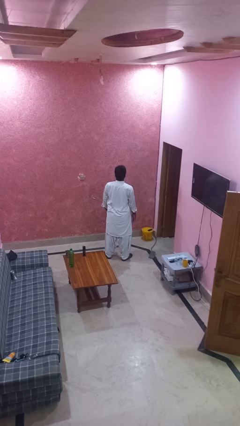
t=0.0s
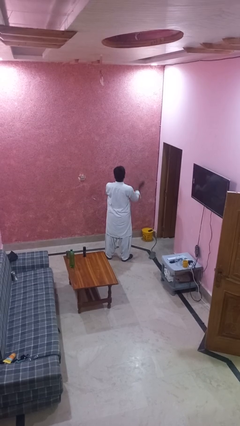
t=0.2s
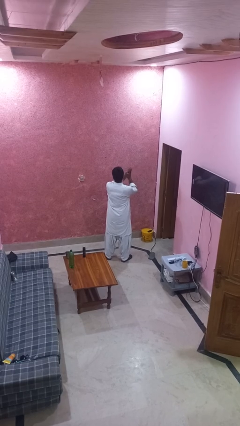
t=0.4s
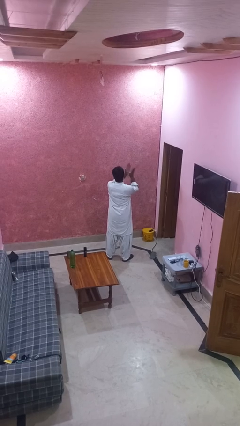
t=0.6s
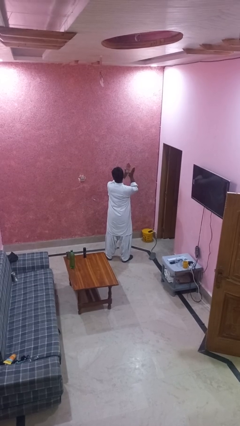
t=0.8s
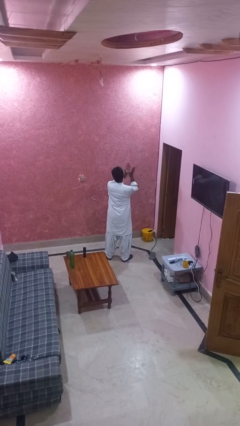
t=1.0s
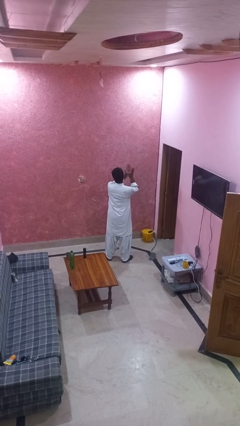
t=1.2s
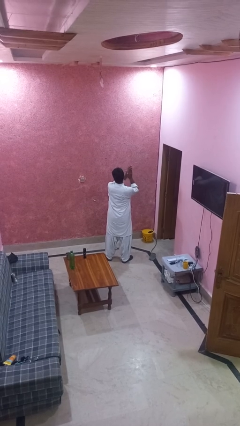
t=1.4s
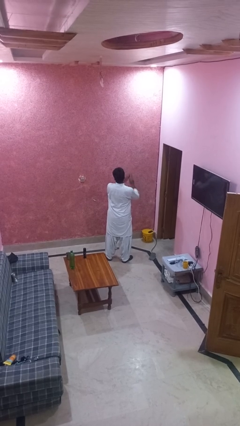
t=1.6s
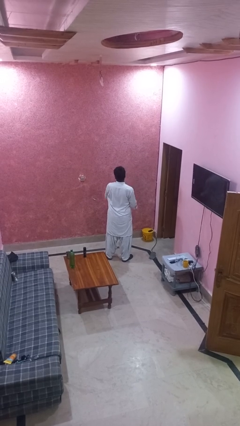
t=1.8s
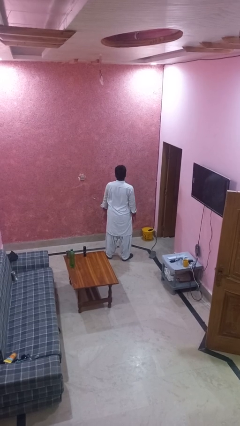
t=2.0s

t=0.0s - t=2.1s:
person claps hands

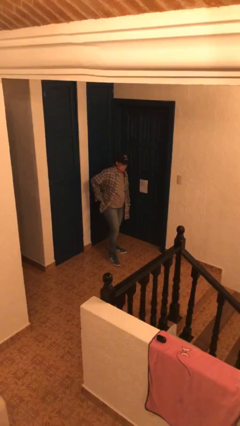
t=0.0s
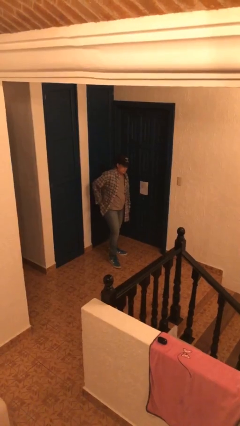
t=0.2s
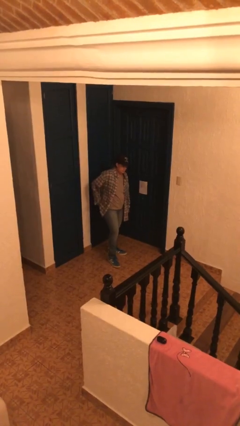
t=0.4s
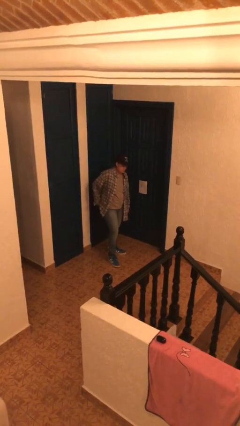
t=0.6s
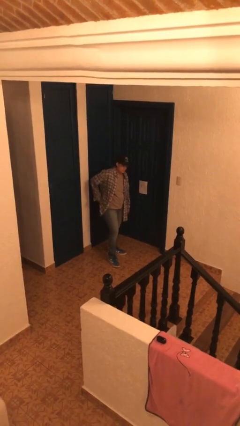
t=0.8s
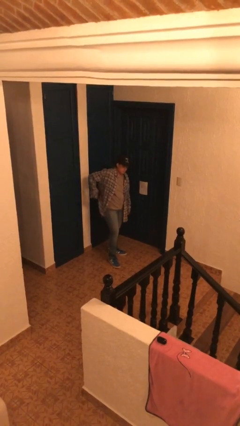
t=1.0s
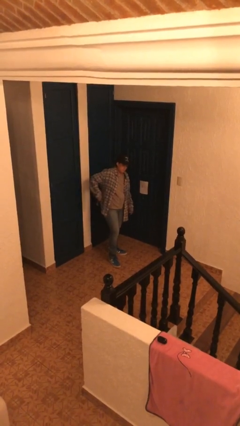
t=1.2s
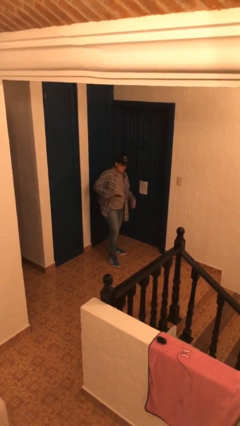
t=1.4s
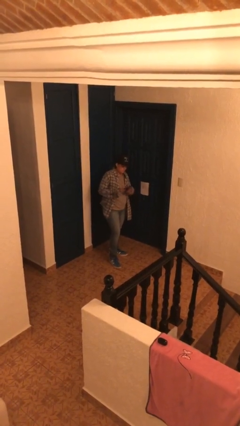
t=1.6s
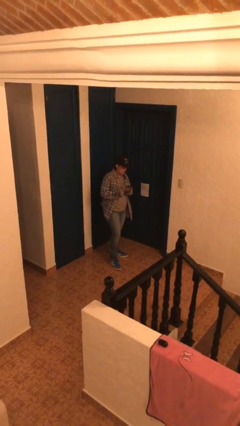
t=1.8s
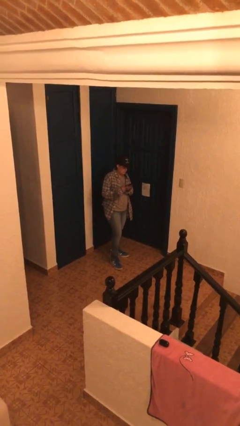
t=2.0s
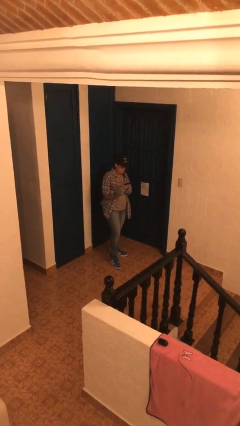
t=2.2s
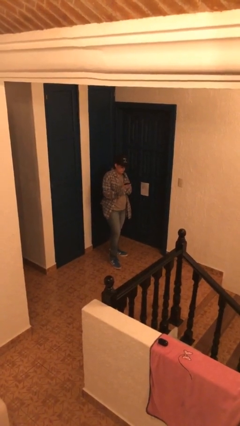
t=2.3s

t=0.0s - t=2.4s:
person takes phone from pocket

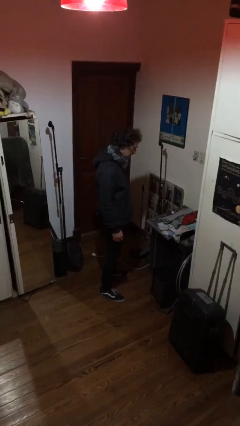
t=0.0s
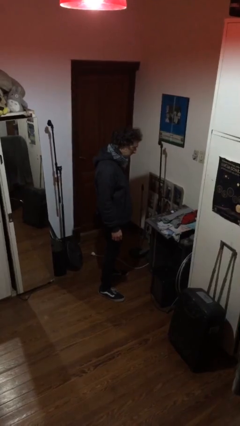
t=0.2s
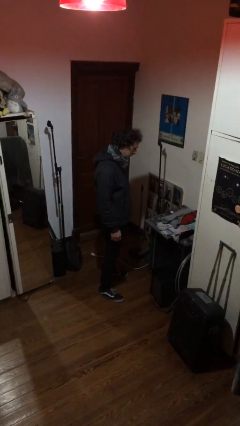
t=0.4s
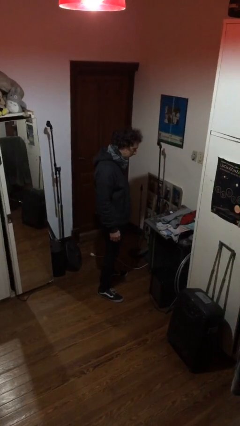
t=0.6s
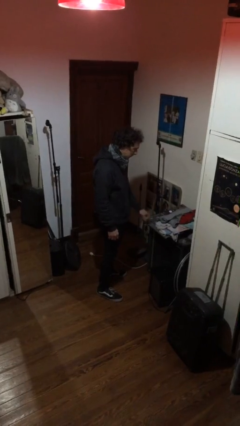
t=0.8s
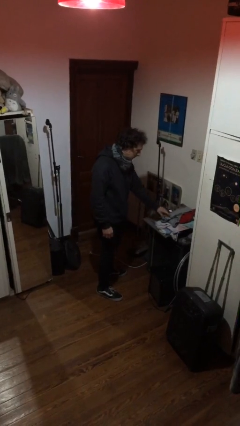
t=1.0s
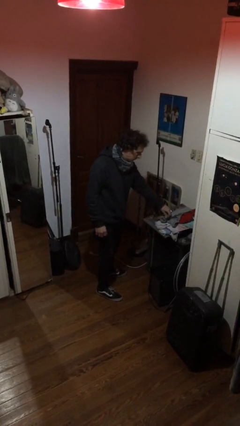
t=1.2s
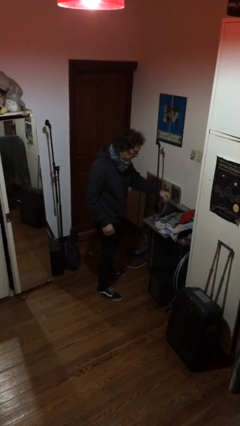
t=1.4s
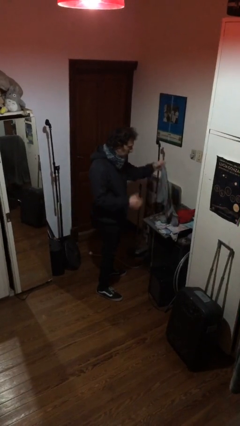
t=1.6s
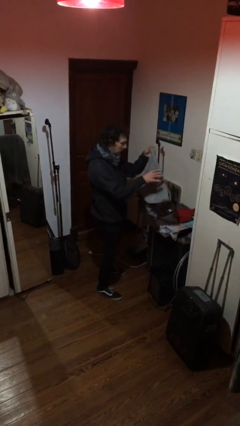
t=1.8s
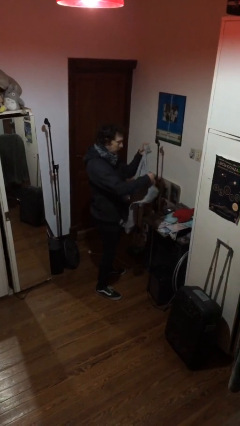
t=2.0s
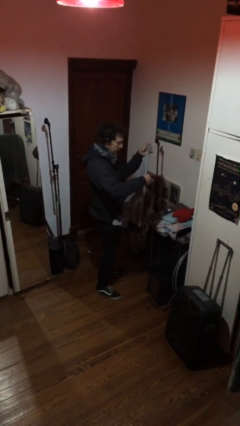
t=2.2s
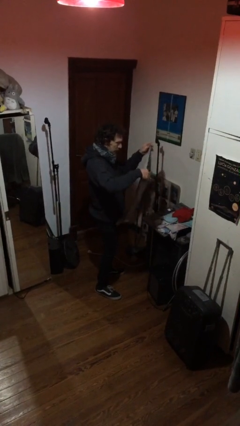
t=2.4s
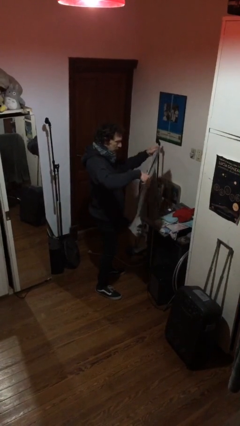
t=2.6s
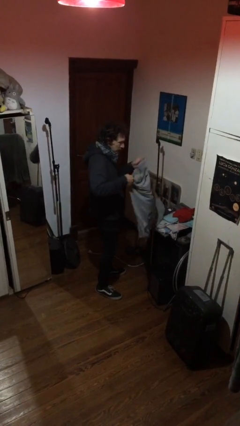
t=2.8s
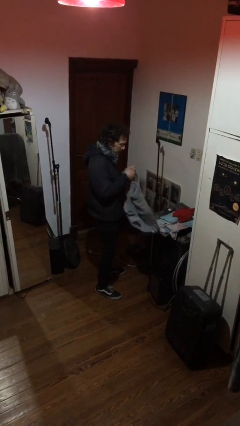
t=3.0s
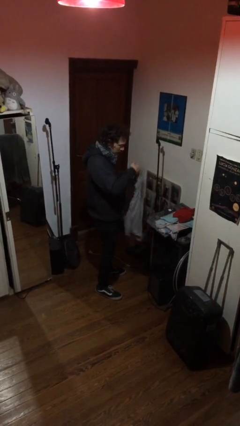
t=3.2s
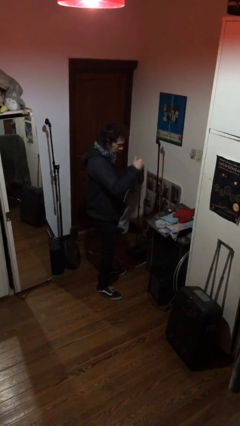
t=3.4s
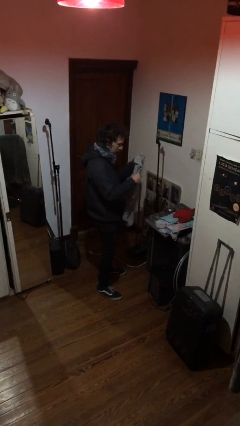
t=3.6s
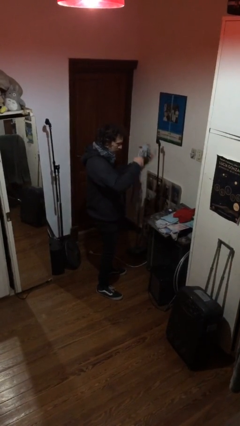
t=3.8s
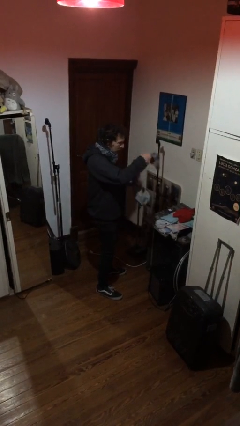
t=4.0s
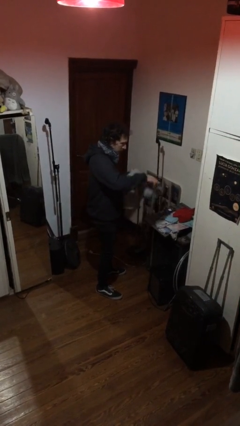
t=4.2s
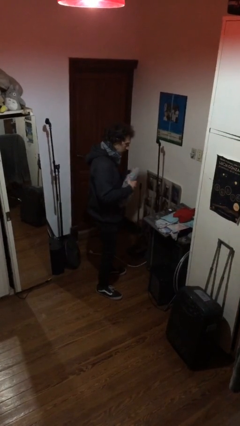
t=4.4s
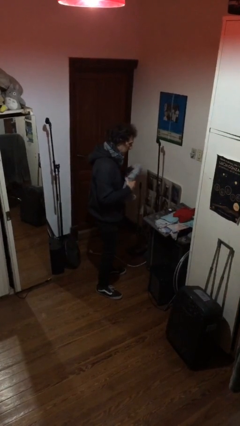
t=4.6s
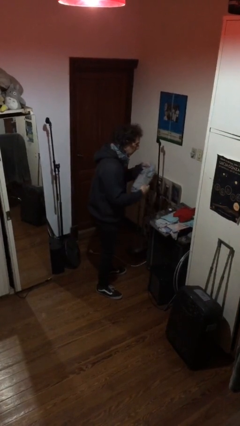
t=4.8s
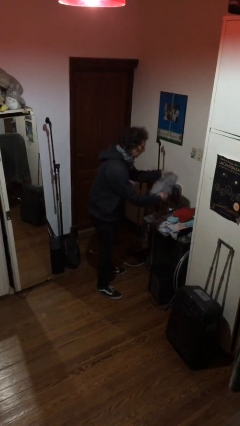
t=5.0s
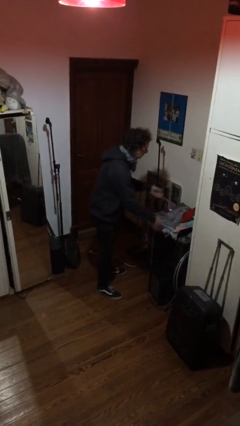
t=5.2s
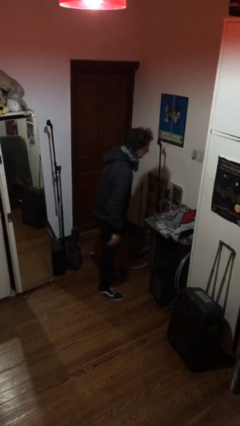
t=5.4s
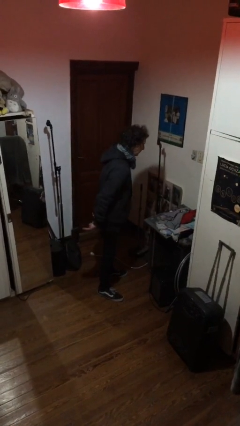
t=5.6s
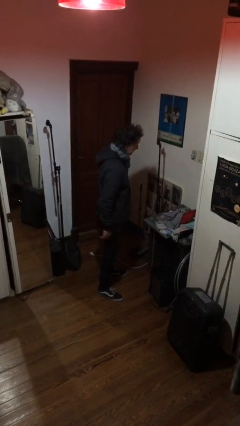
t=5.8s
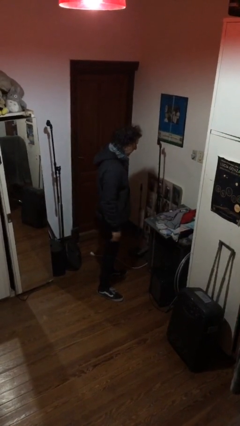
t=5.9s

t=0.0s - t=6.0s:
person folds shirt

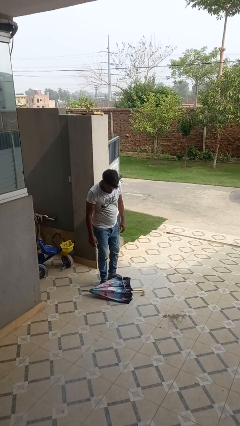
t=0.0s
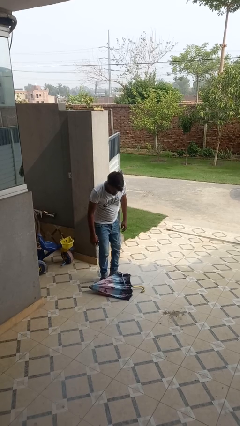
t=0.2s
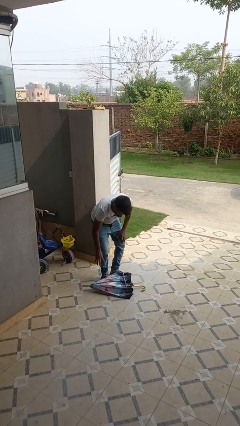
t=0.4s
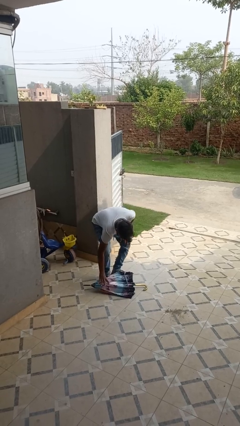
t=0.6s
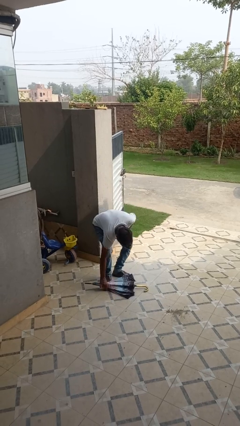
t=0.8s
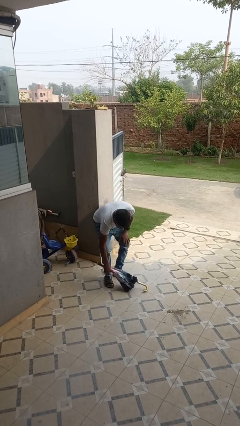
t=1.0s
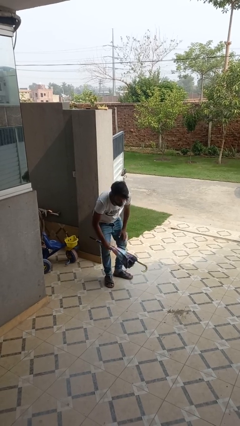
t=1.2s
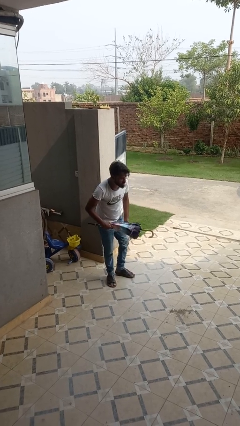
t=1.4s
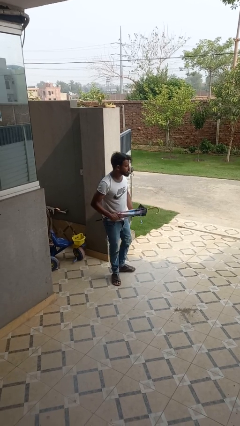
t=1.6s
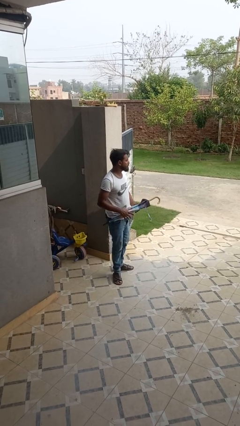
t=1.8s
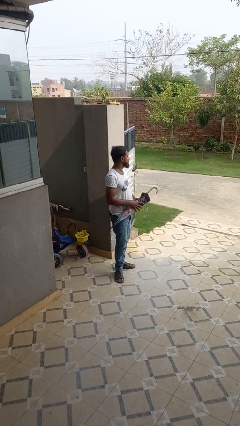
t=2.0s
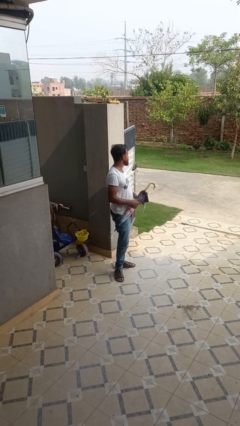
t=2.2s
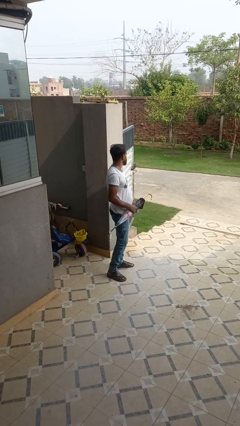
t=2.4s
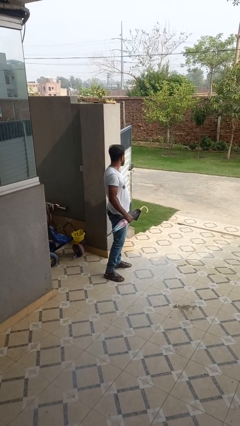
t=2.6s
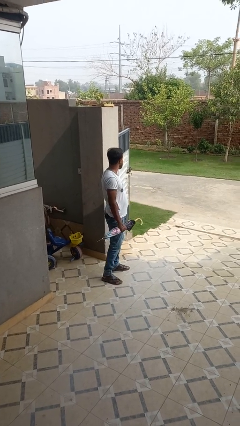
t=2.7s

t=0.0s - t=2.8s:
person picks up object from floor

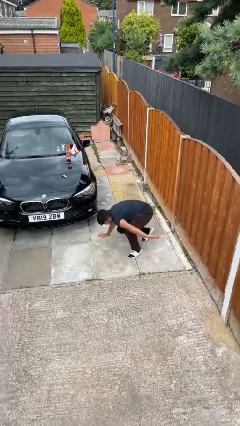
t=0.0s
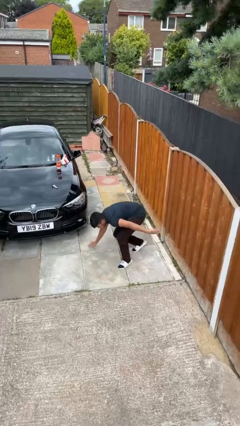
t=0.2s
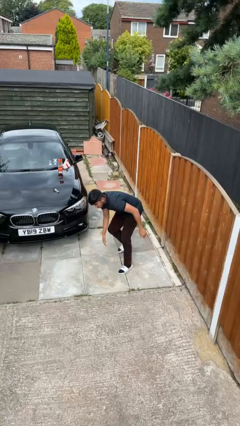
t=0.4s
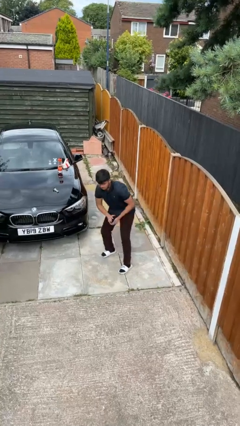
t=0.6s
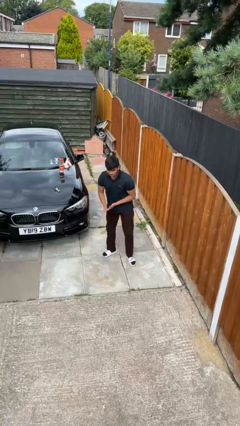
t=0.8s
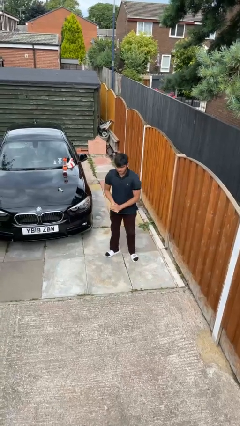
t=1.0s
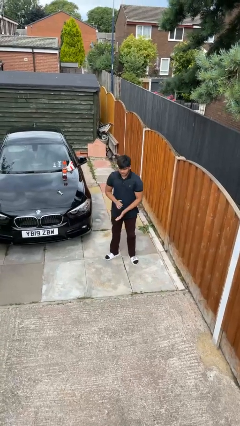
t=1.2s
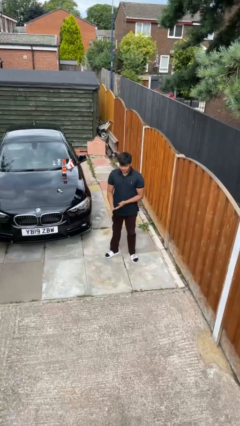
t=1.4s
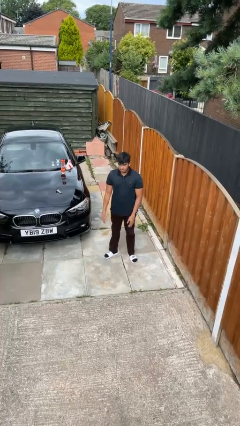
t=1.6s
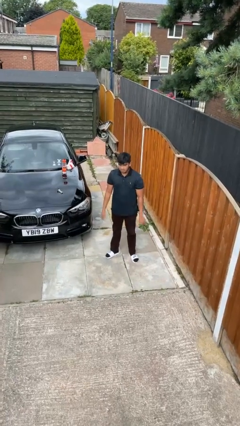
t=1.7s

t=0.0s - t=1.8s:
person stands up from floor

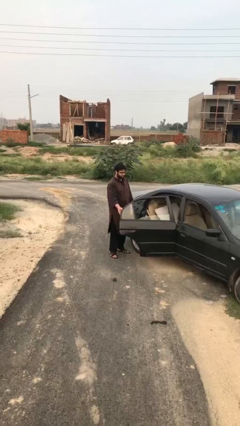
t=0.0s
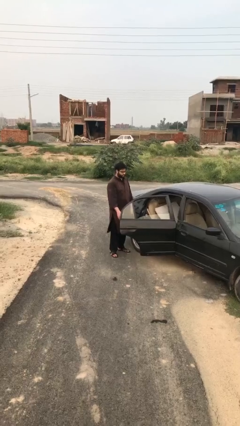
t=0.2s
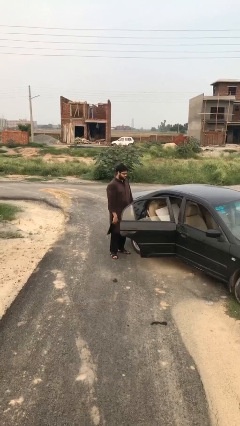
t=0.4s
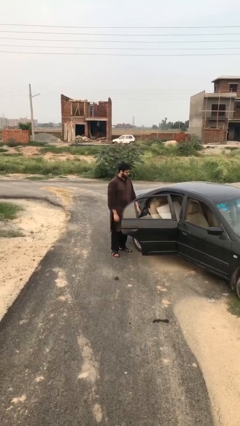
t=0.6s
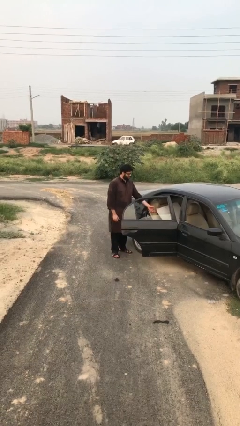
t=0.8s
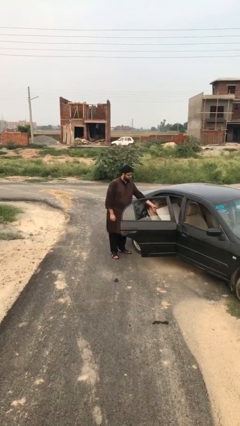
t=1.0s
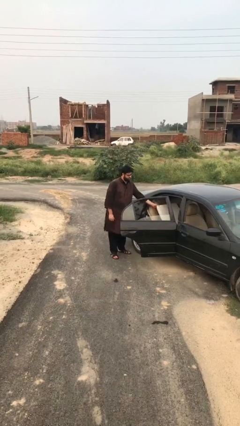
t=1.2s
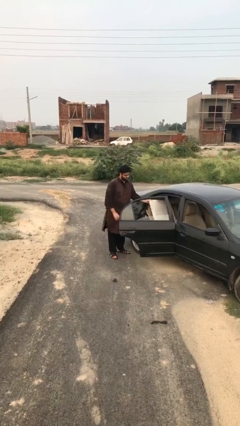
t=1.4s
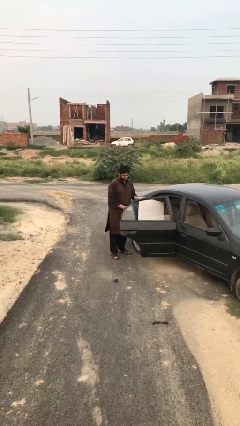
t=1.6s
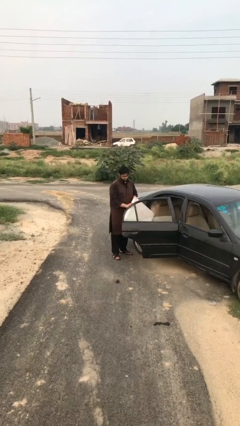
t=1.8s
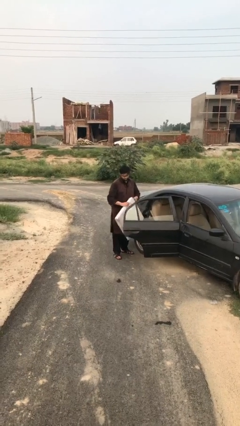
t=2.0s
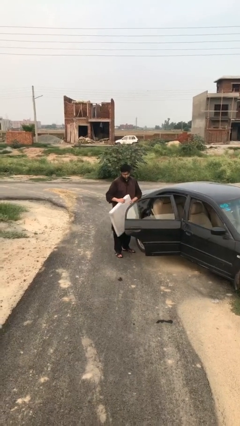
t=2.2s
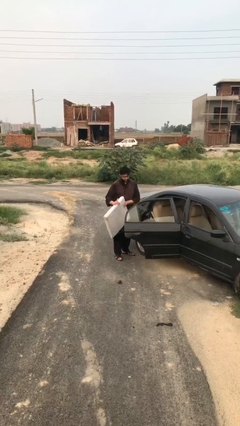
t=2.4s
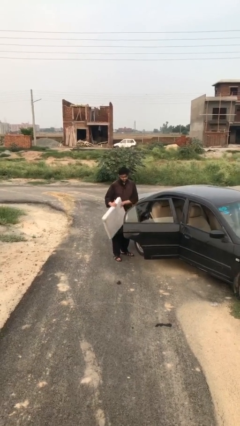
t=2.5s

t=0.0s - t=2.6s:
person unloads car
